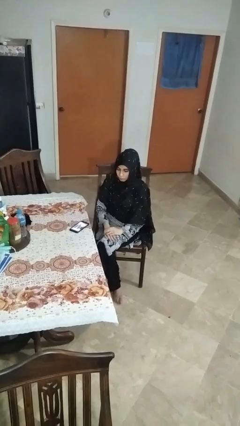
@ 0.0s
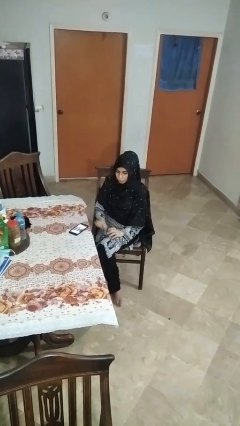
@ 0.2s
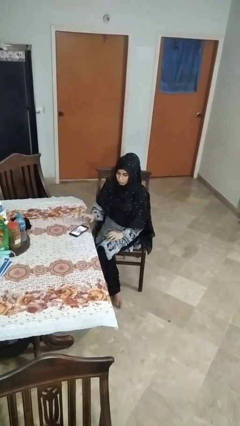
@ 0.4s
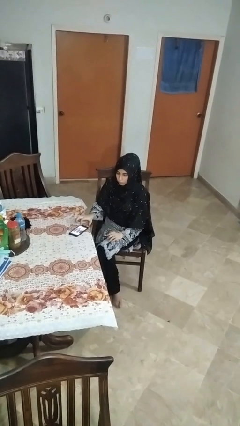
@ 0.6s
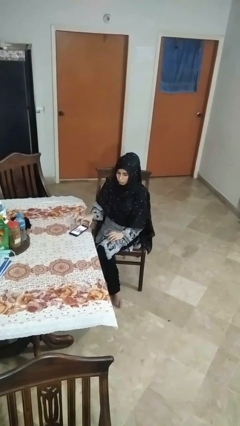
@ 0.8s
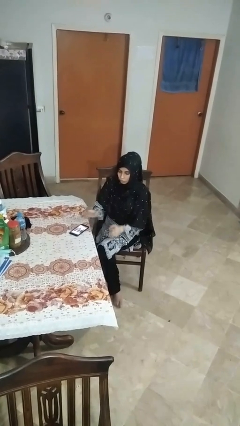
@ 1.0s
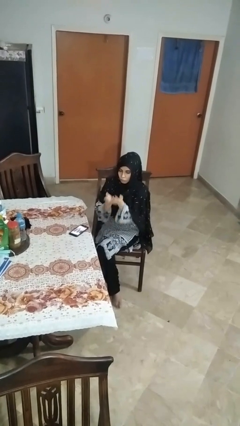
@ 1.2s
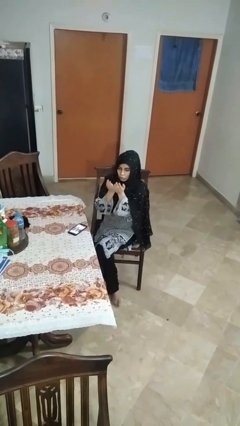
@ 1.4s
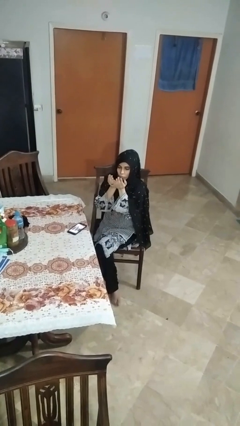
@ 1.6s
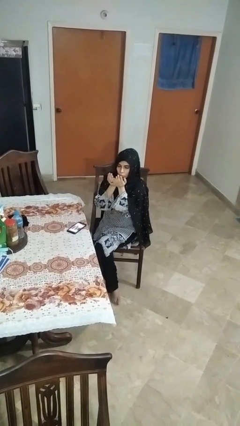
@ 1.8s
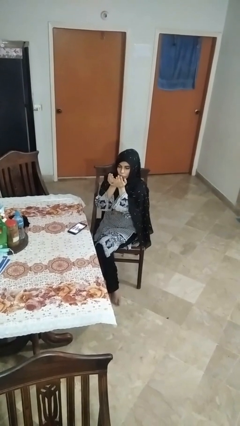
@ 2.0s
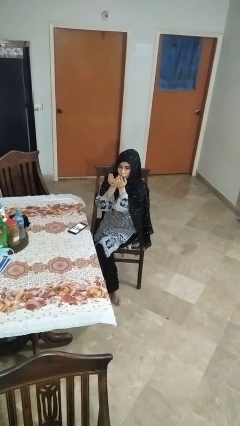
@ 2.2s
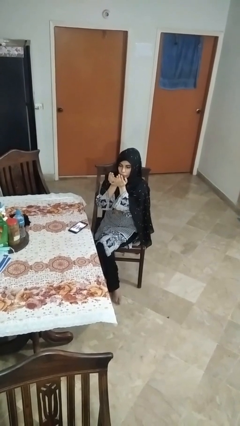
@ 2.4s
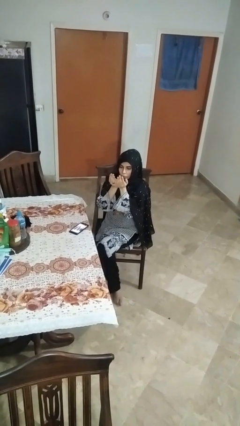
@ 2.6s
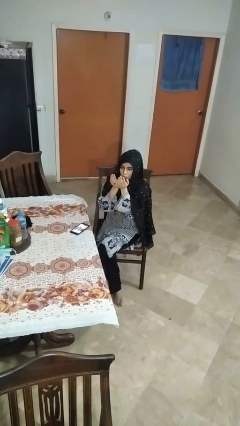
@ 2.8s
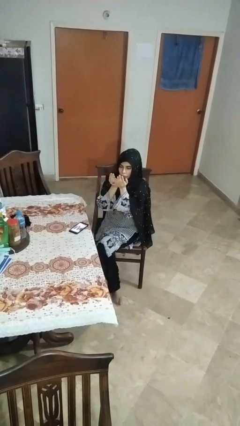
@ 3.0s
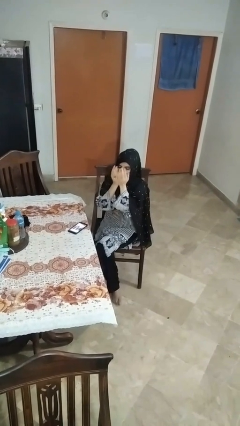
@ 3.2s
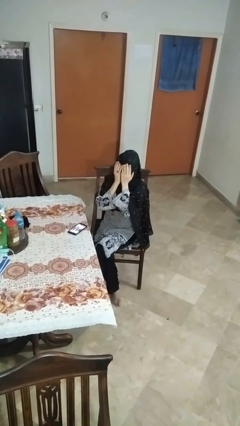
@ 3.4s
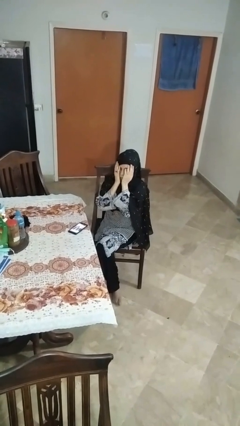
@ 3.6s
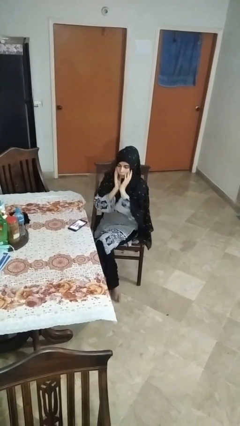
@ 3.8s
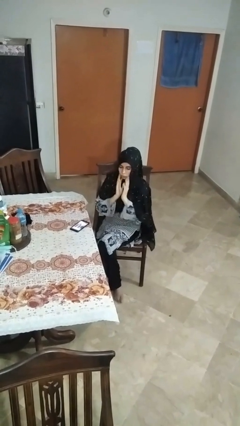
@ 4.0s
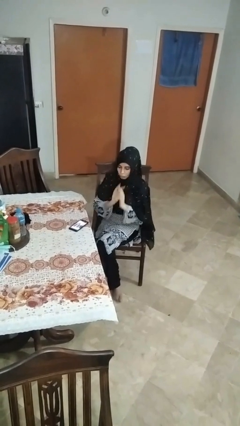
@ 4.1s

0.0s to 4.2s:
person prays

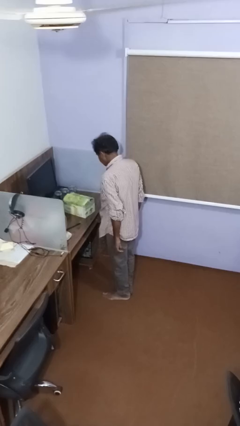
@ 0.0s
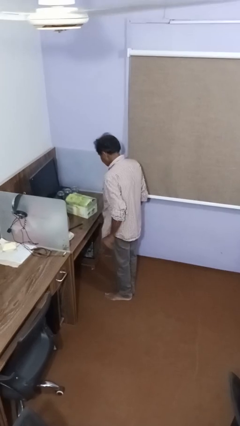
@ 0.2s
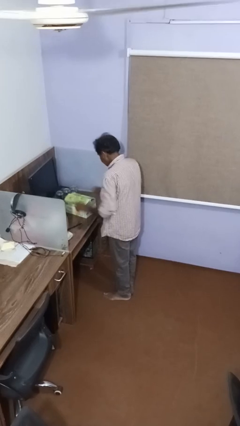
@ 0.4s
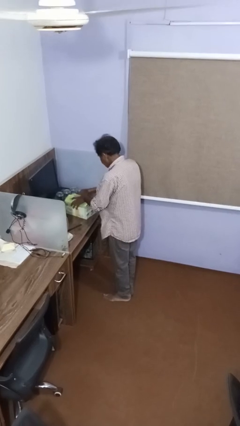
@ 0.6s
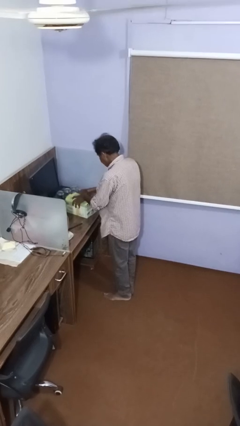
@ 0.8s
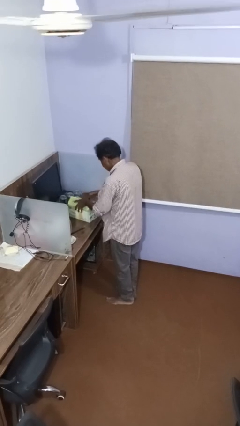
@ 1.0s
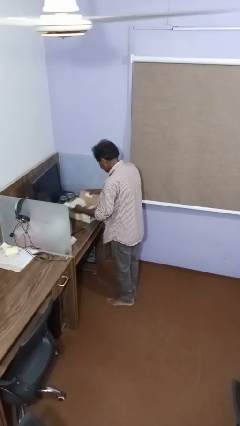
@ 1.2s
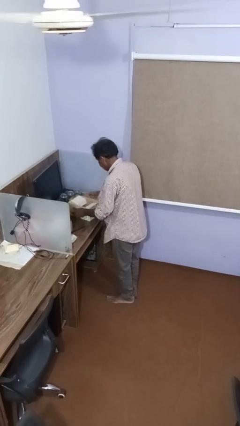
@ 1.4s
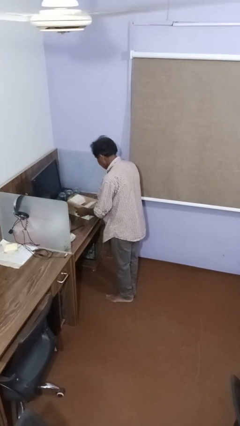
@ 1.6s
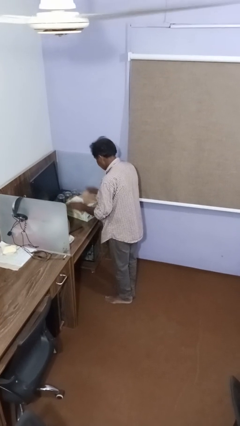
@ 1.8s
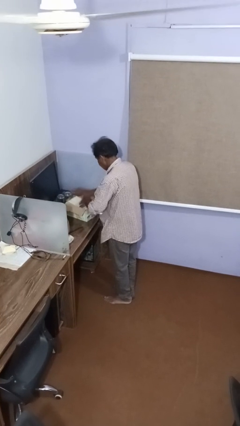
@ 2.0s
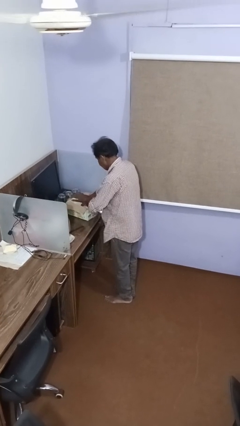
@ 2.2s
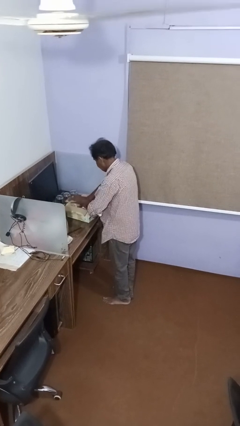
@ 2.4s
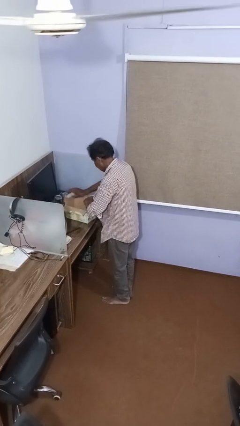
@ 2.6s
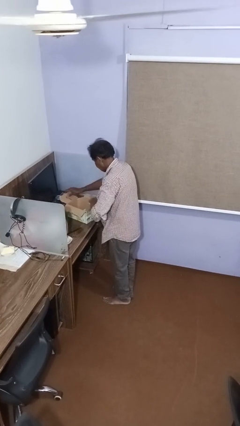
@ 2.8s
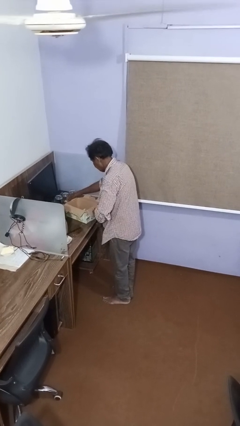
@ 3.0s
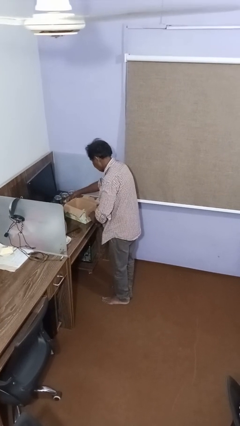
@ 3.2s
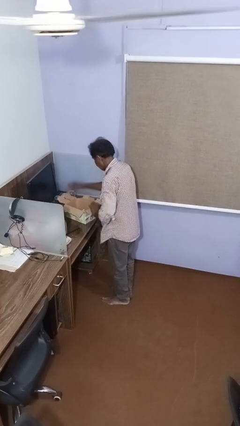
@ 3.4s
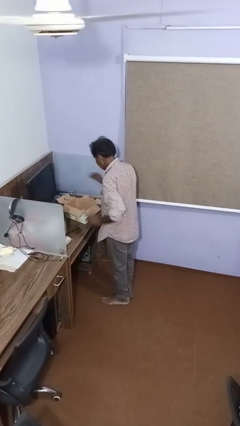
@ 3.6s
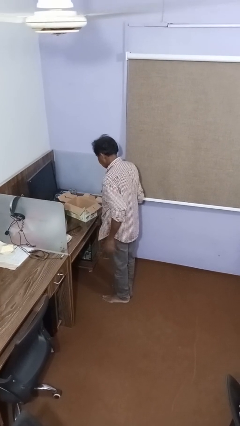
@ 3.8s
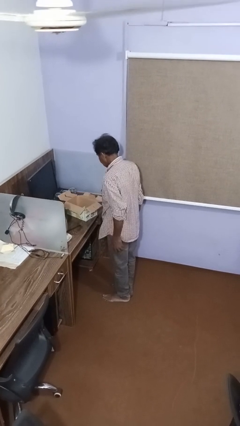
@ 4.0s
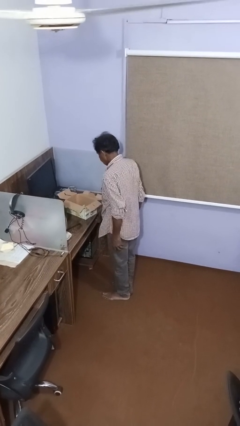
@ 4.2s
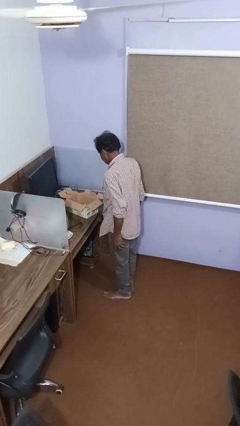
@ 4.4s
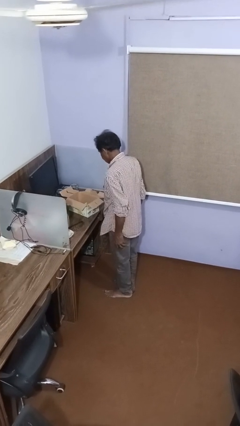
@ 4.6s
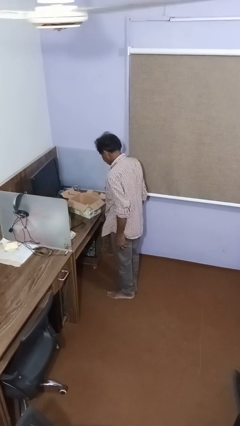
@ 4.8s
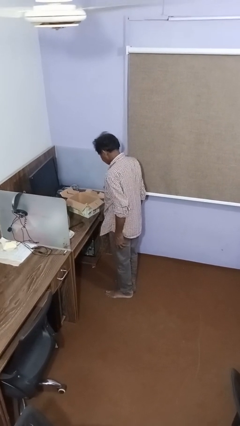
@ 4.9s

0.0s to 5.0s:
person opens box

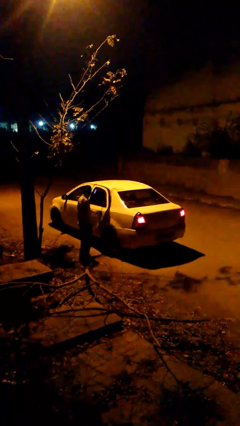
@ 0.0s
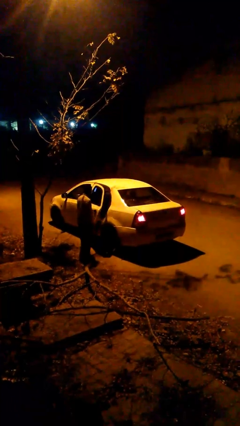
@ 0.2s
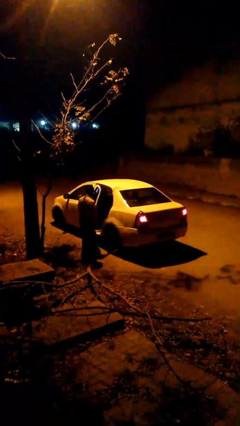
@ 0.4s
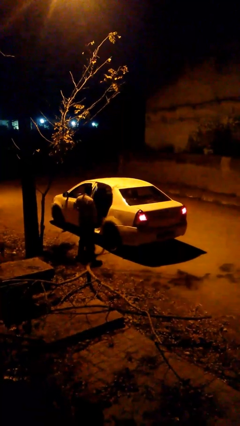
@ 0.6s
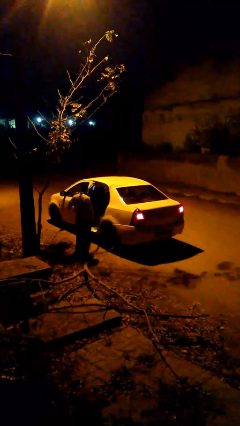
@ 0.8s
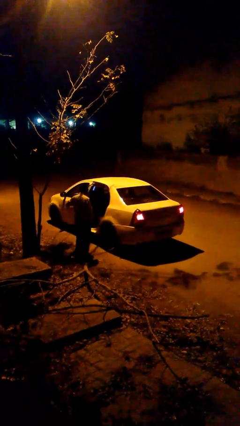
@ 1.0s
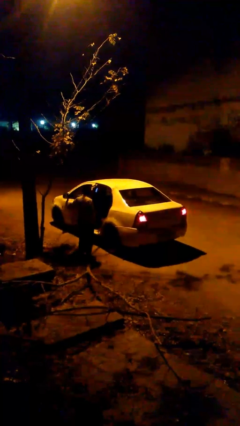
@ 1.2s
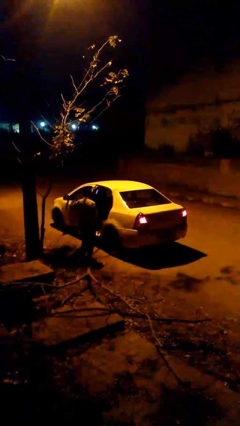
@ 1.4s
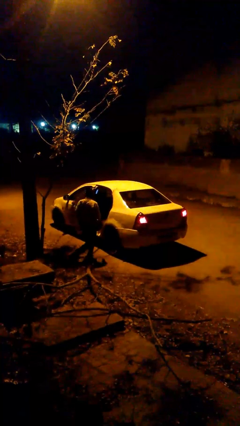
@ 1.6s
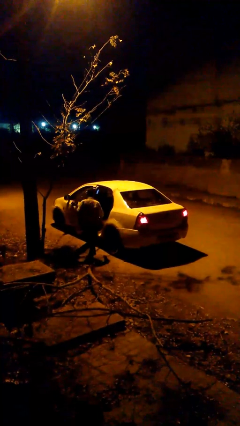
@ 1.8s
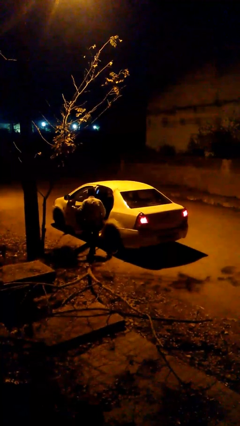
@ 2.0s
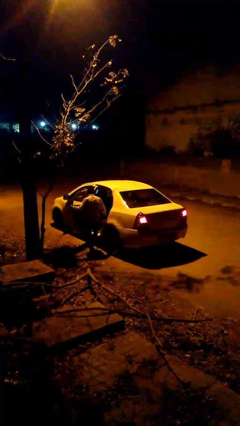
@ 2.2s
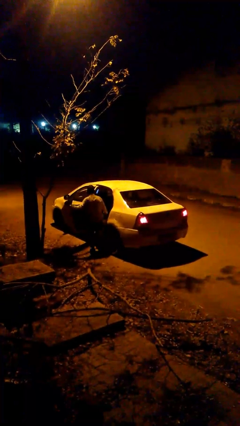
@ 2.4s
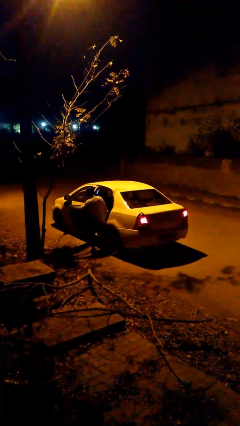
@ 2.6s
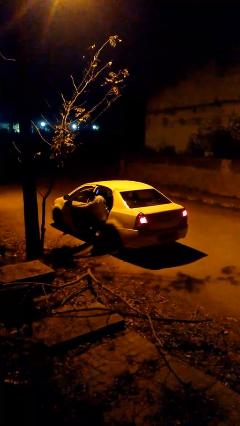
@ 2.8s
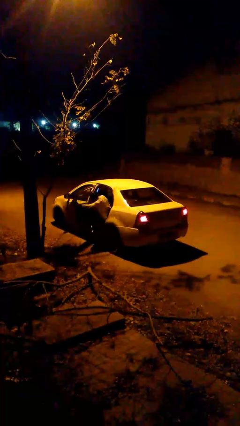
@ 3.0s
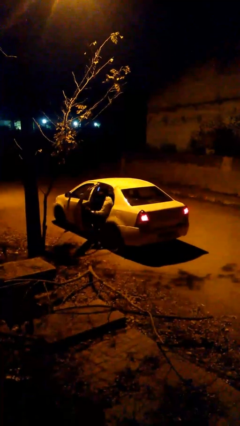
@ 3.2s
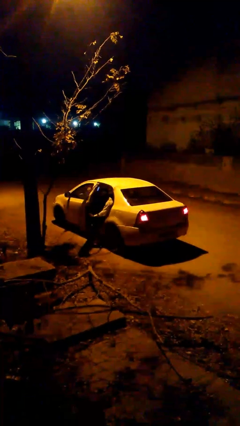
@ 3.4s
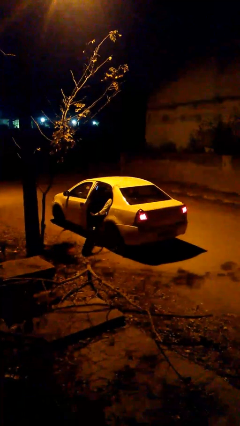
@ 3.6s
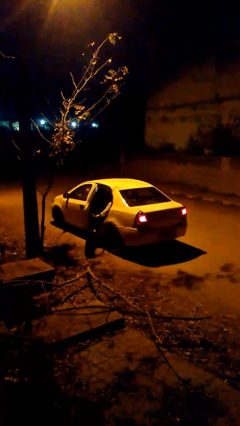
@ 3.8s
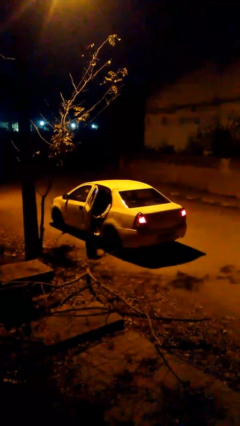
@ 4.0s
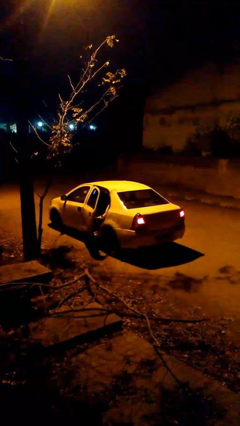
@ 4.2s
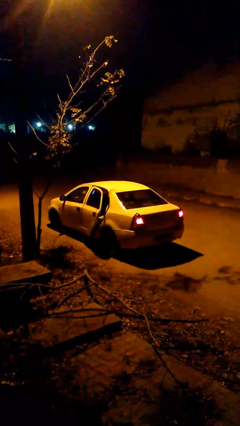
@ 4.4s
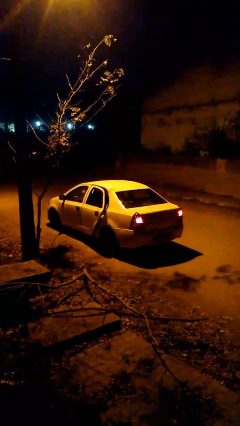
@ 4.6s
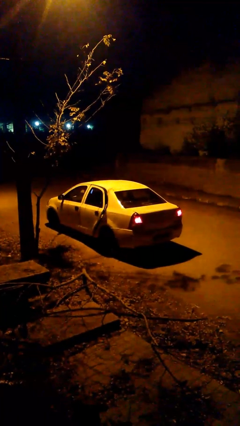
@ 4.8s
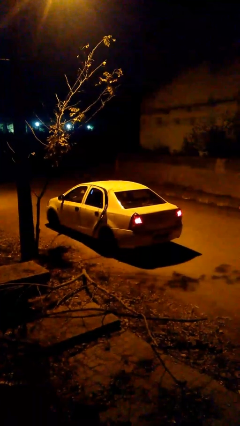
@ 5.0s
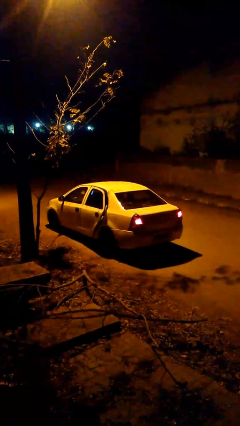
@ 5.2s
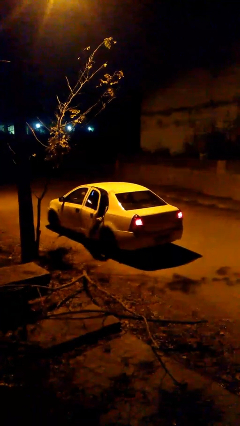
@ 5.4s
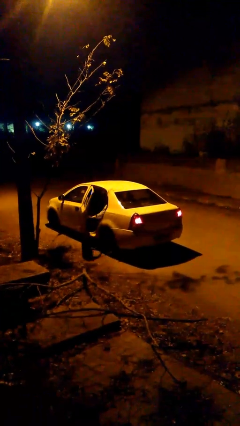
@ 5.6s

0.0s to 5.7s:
car picks up person

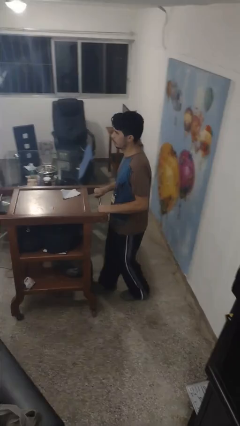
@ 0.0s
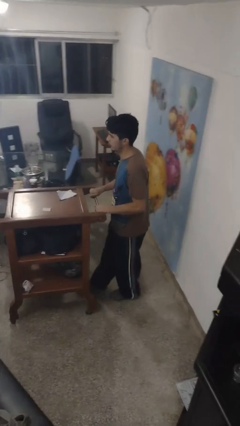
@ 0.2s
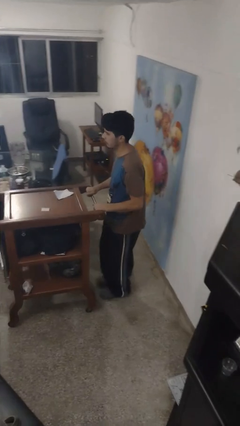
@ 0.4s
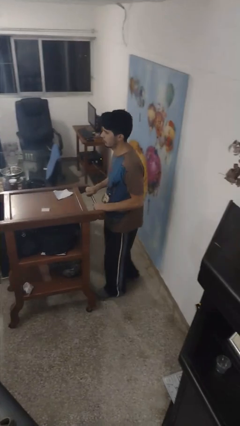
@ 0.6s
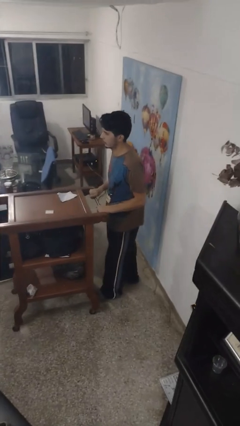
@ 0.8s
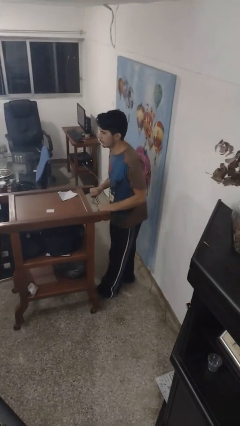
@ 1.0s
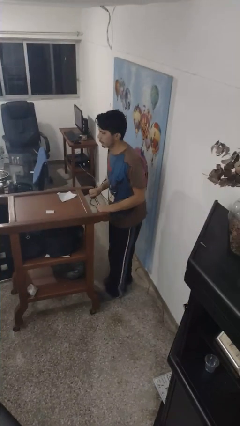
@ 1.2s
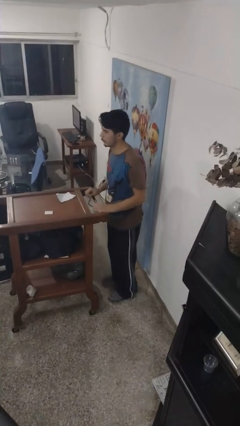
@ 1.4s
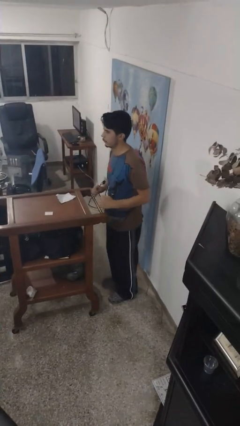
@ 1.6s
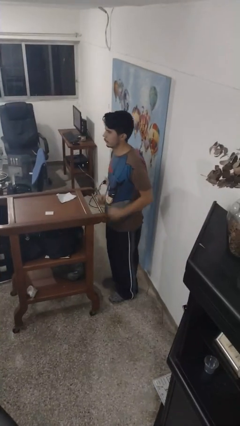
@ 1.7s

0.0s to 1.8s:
person pulls wheeled cart

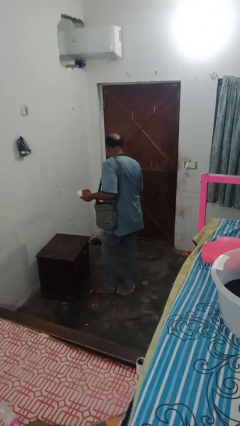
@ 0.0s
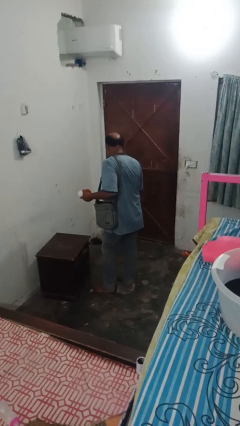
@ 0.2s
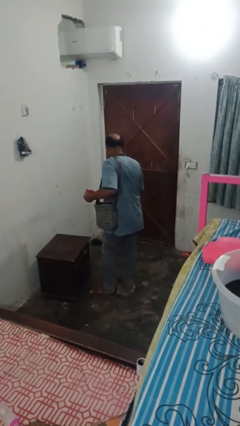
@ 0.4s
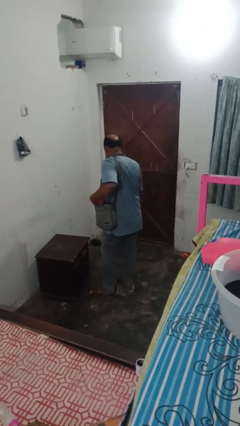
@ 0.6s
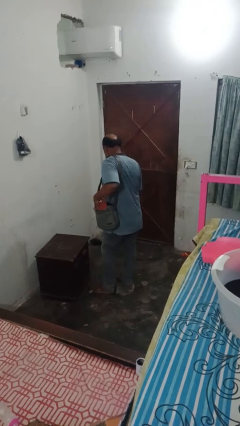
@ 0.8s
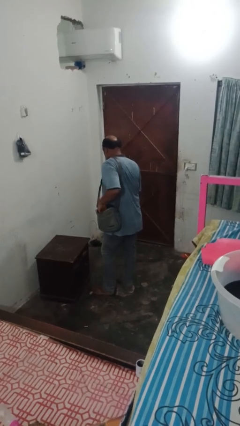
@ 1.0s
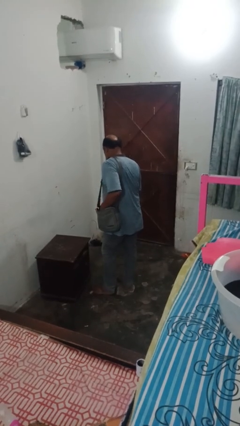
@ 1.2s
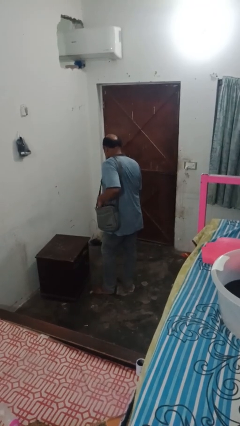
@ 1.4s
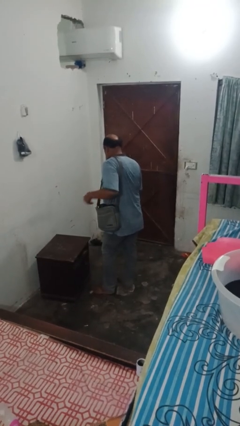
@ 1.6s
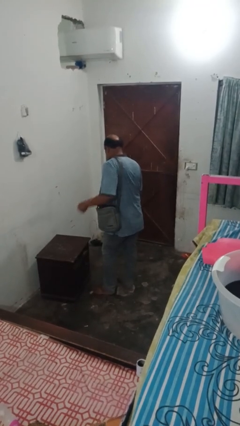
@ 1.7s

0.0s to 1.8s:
person puts object into bag
